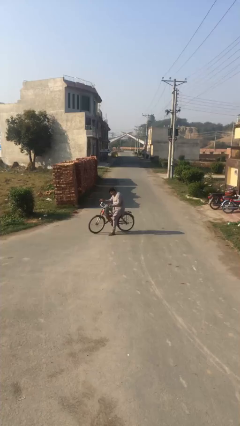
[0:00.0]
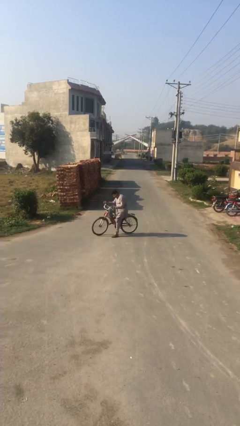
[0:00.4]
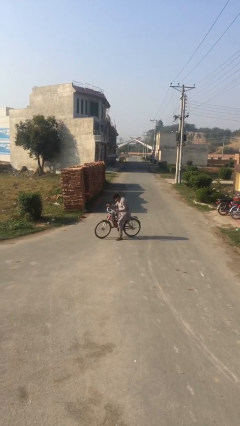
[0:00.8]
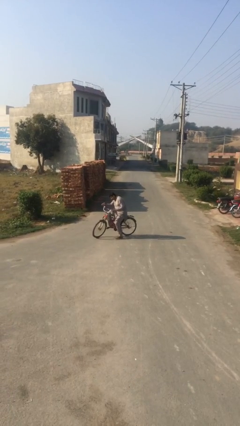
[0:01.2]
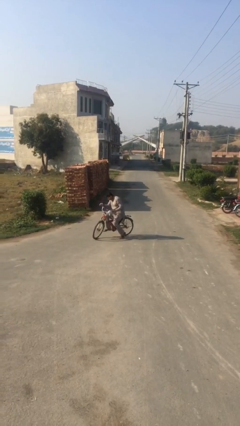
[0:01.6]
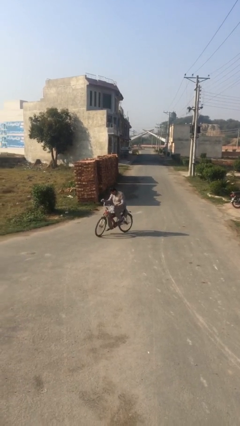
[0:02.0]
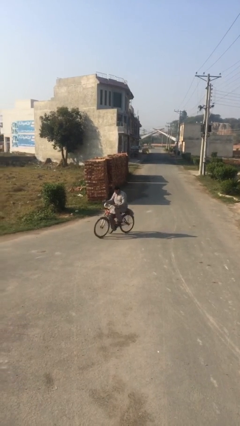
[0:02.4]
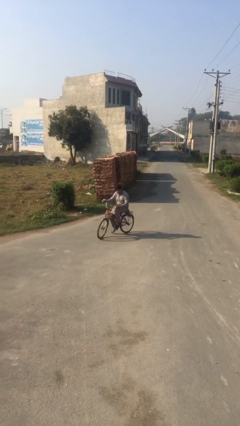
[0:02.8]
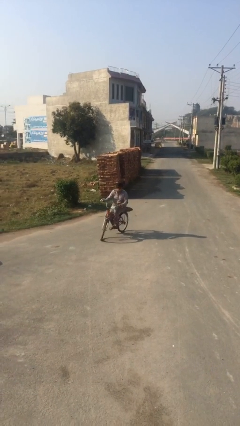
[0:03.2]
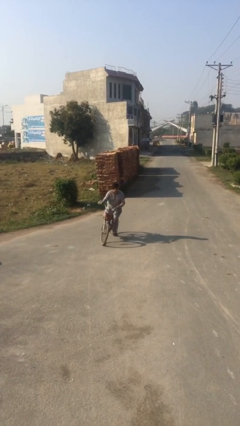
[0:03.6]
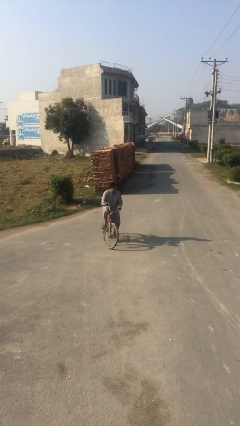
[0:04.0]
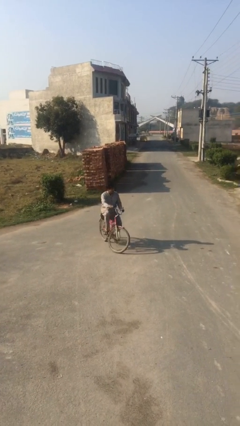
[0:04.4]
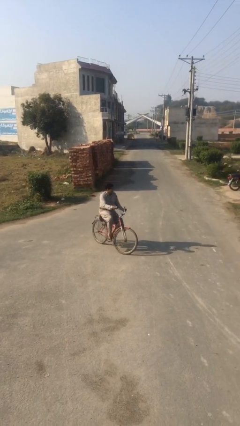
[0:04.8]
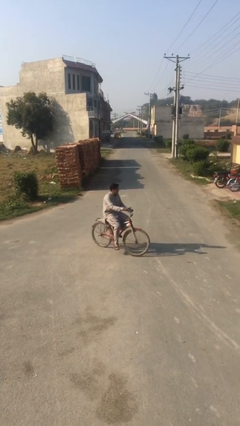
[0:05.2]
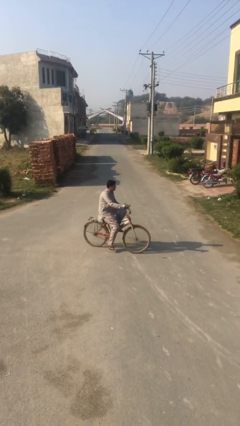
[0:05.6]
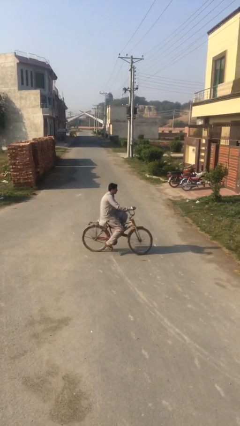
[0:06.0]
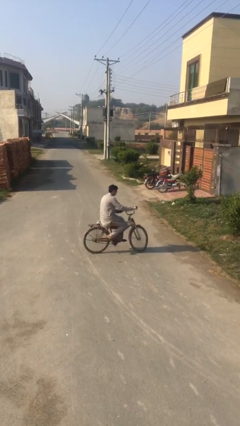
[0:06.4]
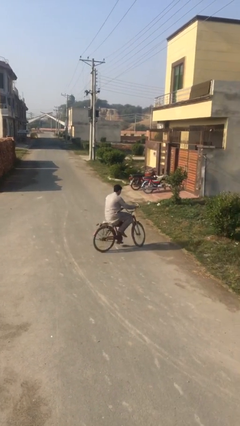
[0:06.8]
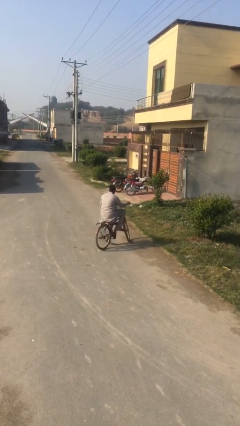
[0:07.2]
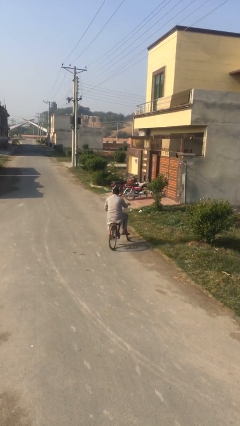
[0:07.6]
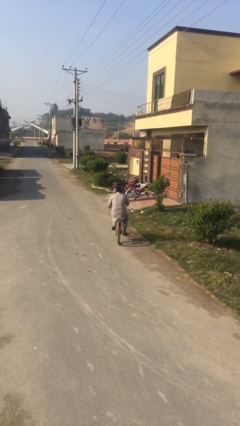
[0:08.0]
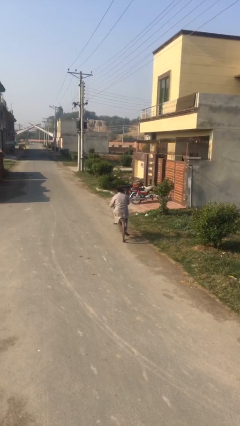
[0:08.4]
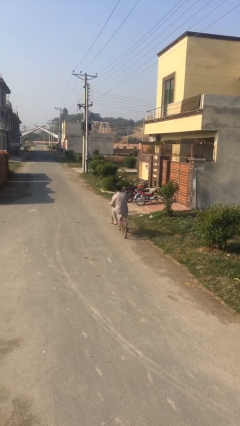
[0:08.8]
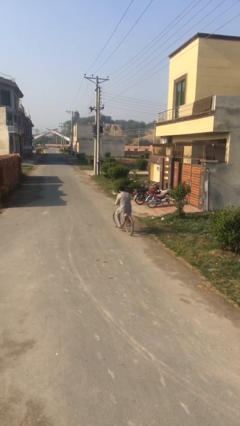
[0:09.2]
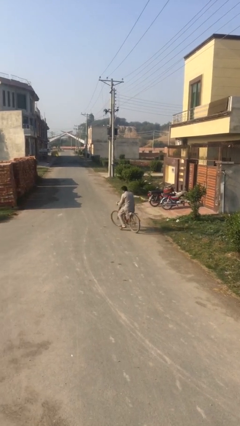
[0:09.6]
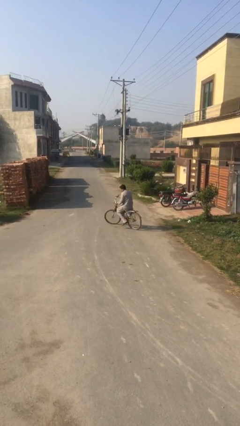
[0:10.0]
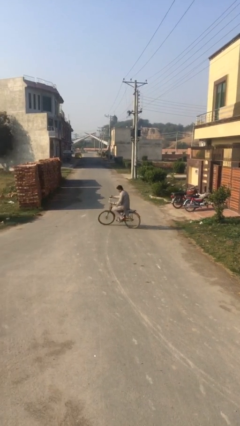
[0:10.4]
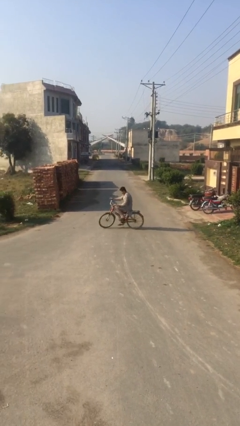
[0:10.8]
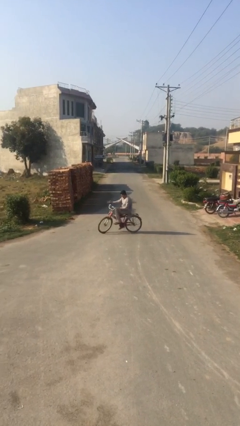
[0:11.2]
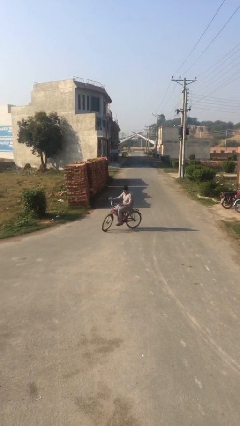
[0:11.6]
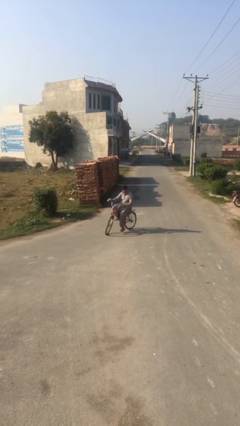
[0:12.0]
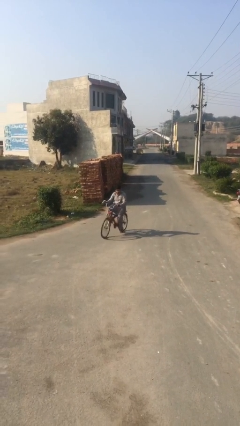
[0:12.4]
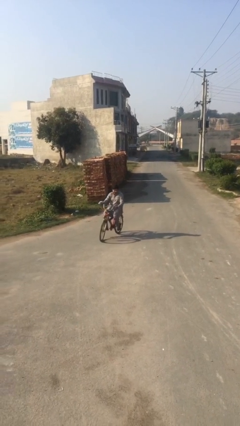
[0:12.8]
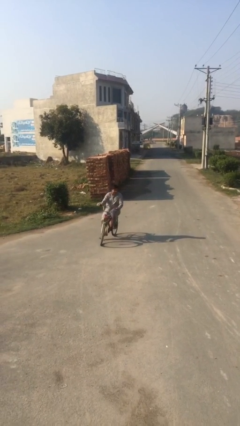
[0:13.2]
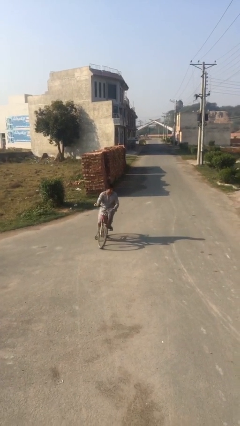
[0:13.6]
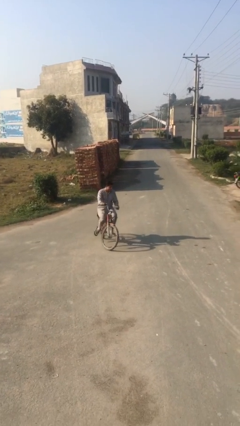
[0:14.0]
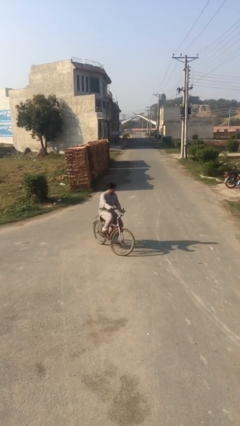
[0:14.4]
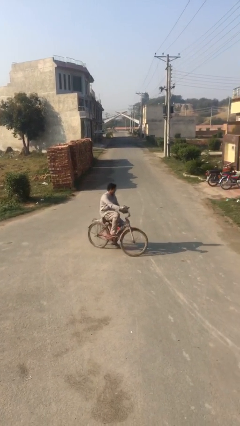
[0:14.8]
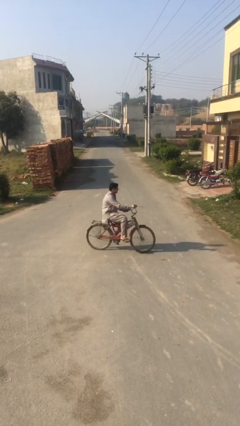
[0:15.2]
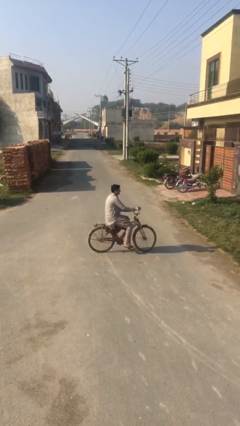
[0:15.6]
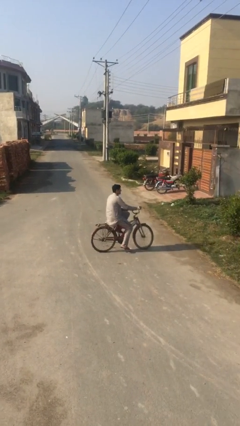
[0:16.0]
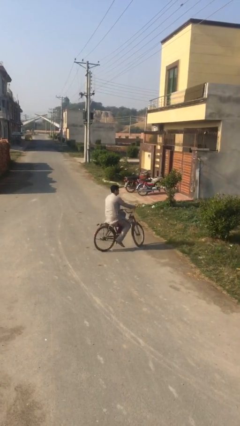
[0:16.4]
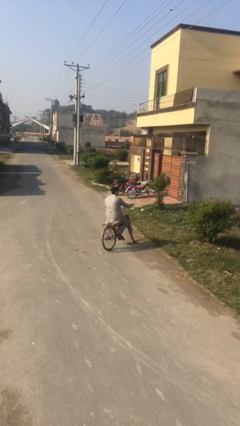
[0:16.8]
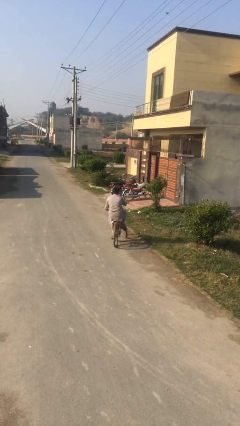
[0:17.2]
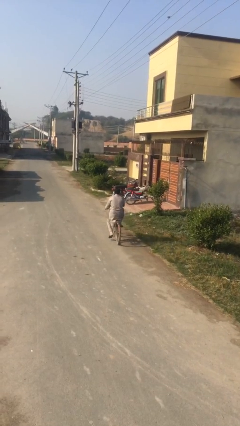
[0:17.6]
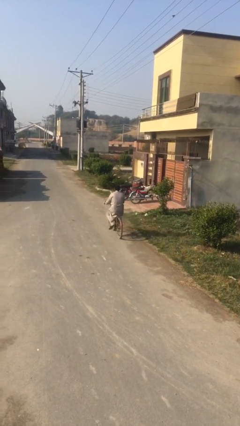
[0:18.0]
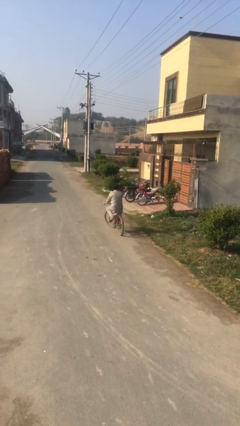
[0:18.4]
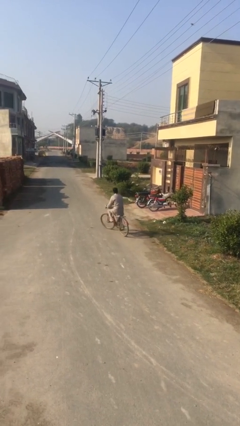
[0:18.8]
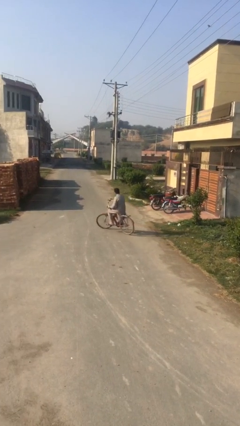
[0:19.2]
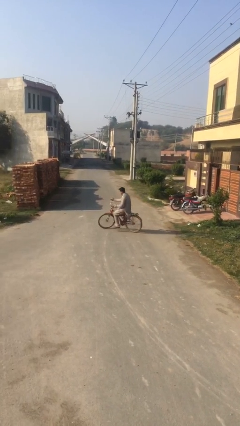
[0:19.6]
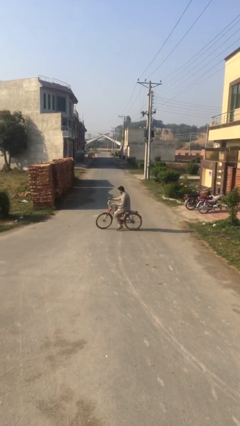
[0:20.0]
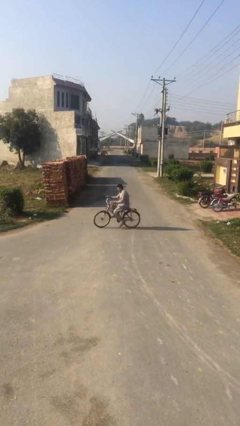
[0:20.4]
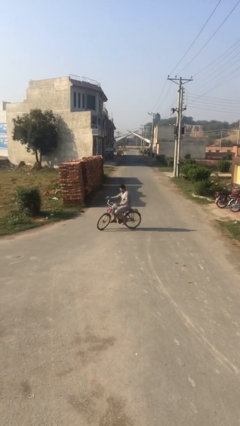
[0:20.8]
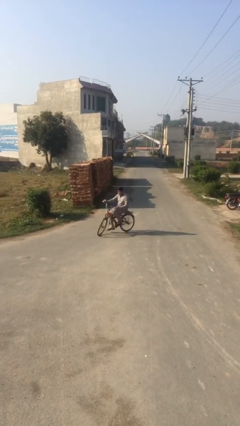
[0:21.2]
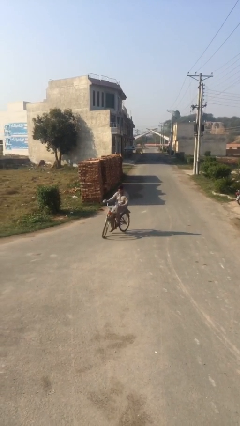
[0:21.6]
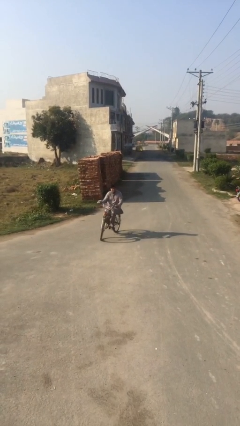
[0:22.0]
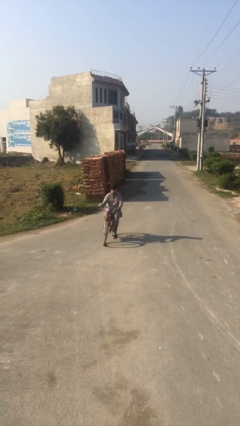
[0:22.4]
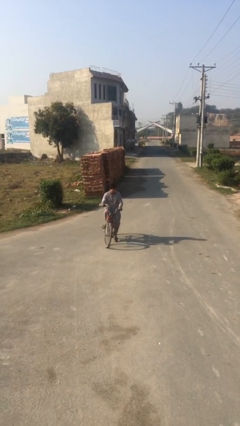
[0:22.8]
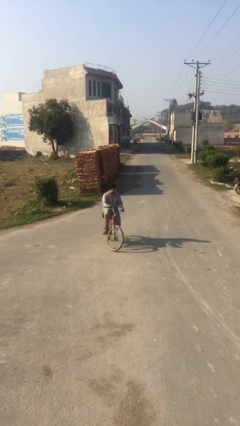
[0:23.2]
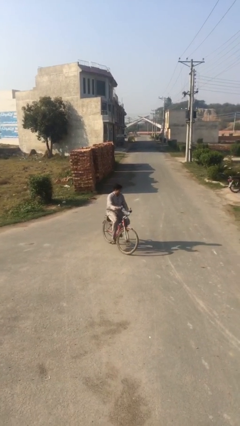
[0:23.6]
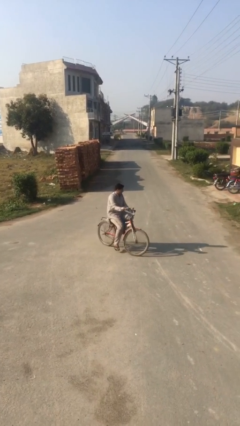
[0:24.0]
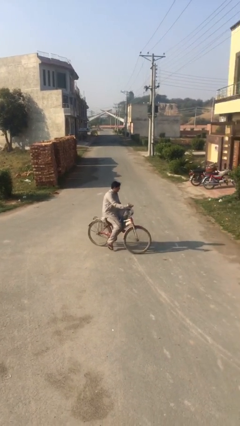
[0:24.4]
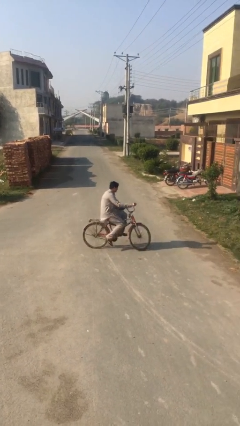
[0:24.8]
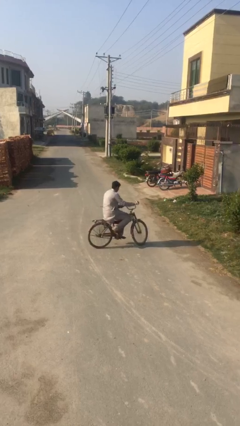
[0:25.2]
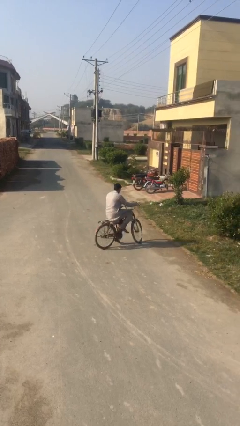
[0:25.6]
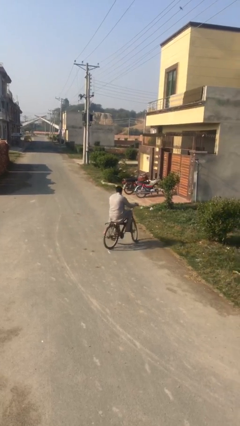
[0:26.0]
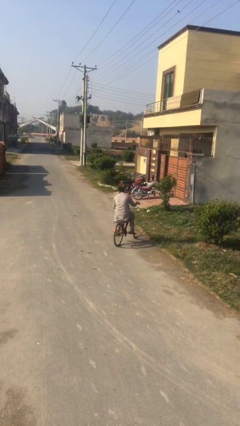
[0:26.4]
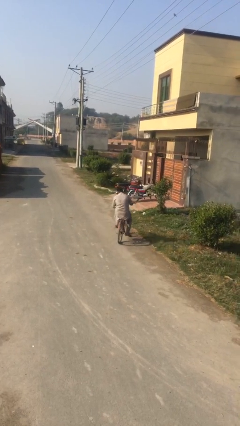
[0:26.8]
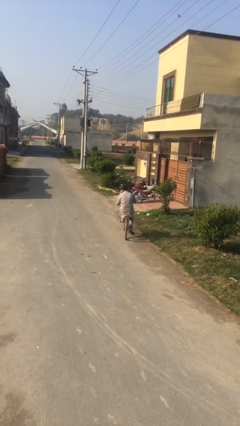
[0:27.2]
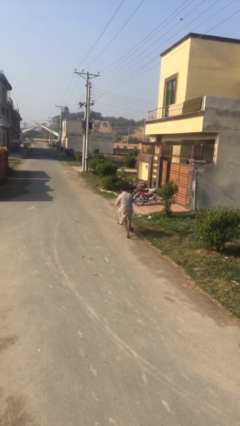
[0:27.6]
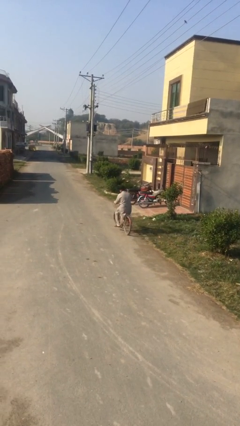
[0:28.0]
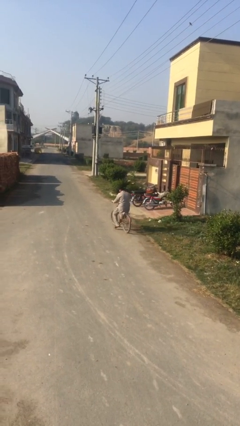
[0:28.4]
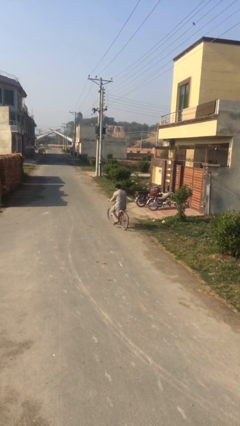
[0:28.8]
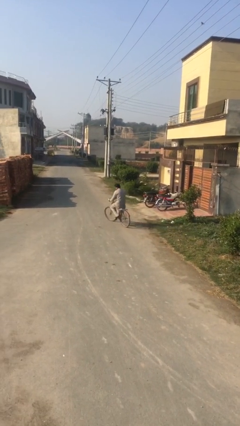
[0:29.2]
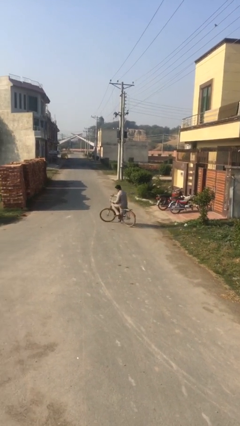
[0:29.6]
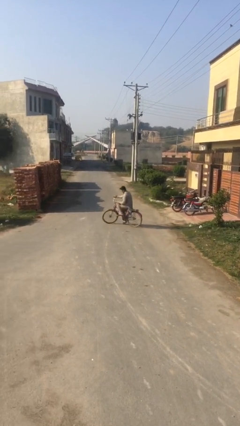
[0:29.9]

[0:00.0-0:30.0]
person rides bicycle

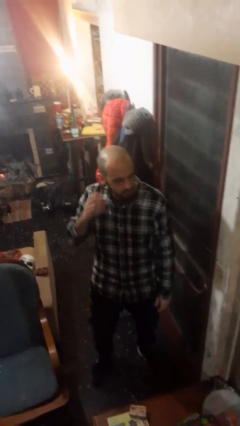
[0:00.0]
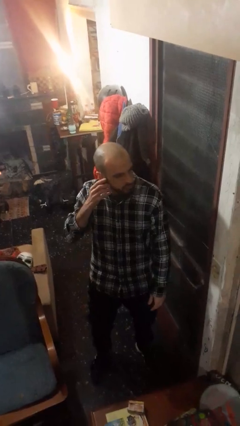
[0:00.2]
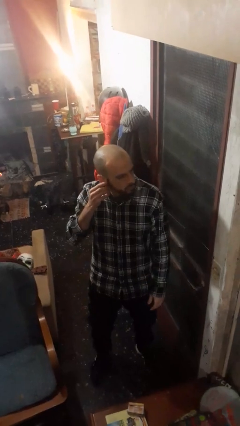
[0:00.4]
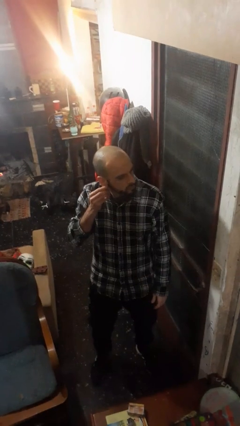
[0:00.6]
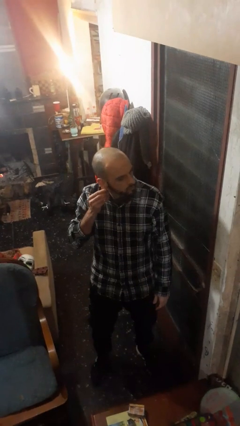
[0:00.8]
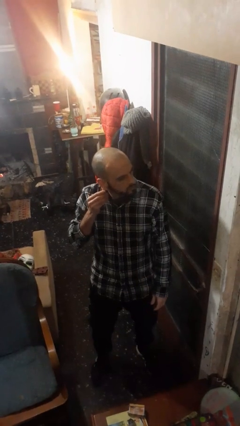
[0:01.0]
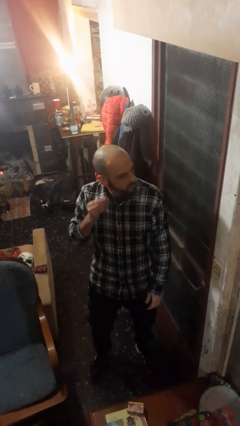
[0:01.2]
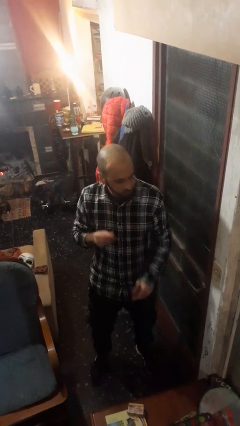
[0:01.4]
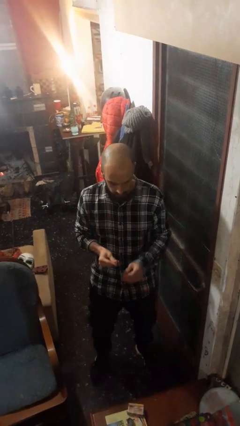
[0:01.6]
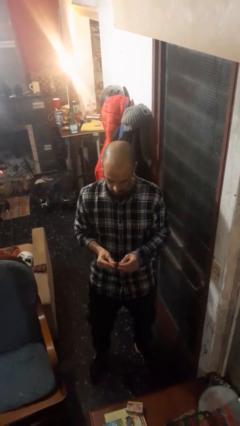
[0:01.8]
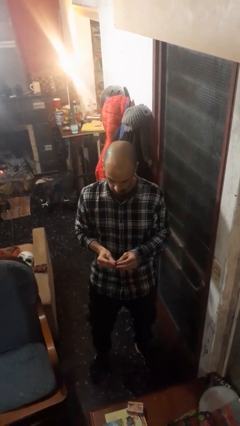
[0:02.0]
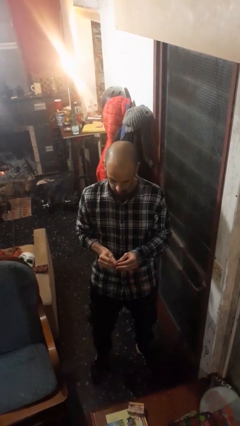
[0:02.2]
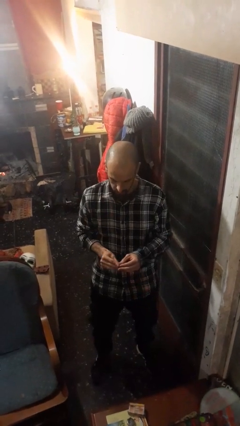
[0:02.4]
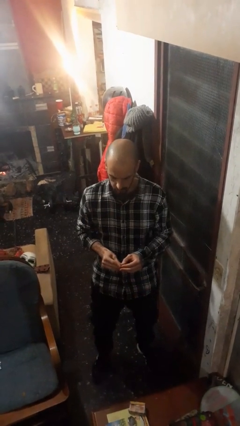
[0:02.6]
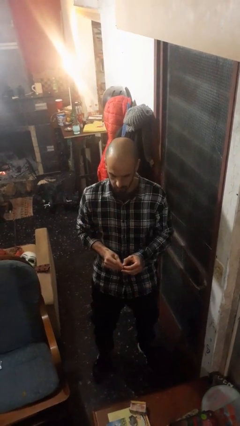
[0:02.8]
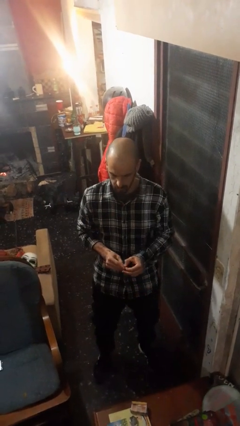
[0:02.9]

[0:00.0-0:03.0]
person takes off earrings
